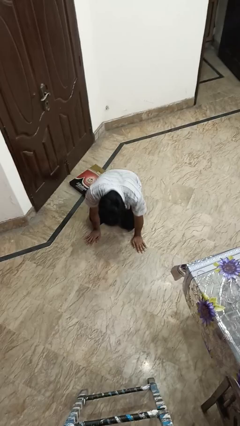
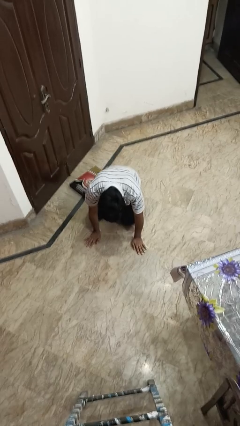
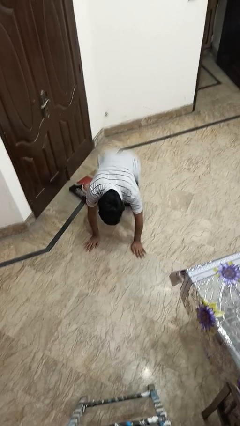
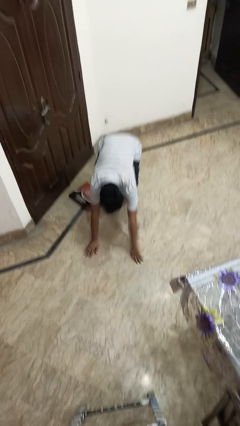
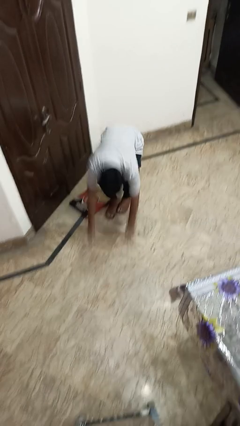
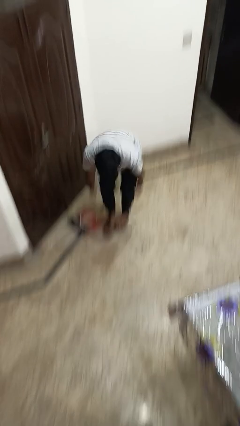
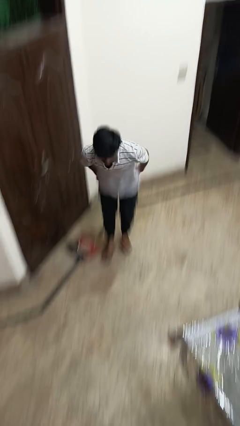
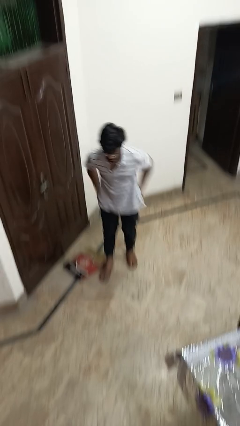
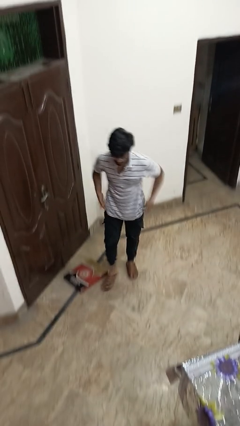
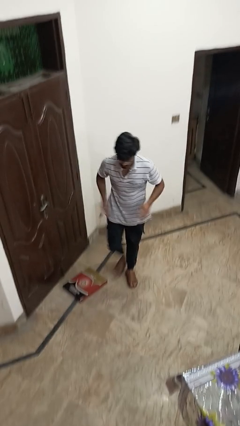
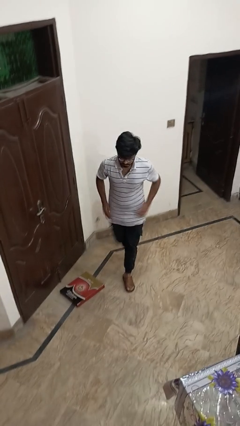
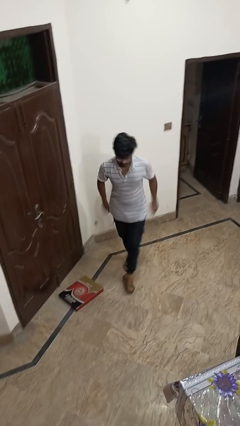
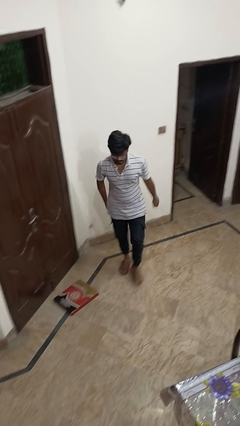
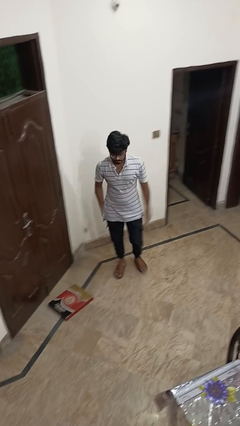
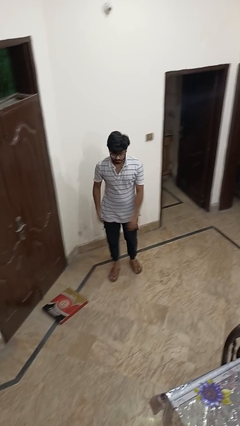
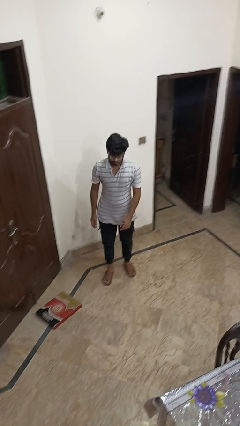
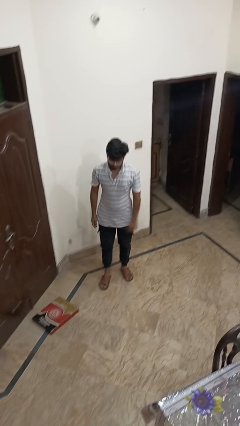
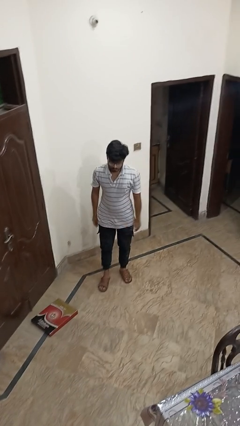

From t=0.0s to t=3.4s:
person stands up from floor

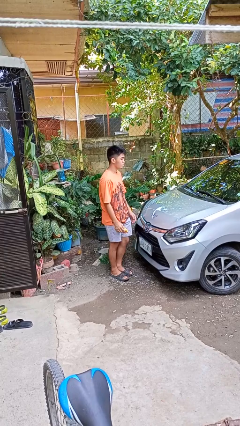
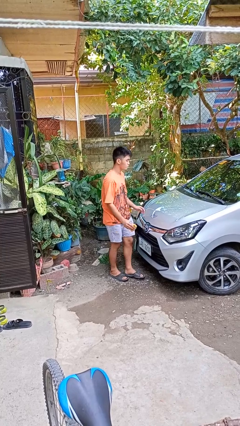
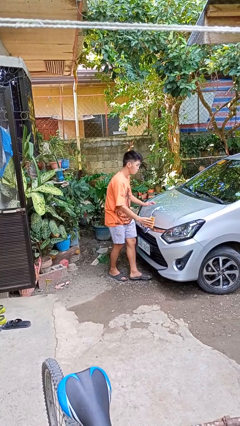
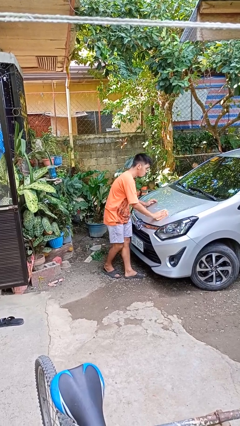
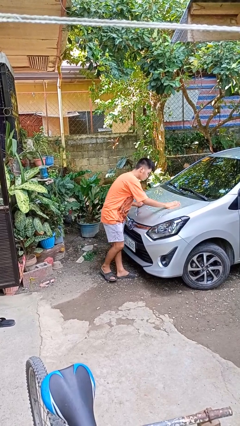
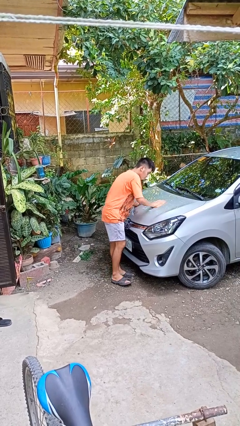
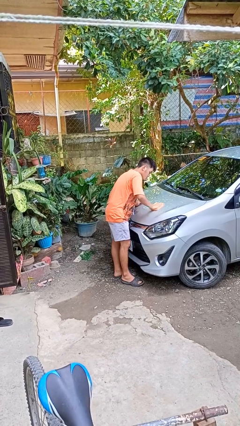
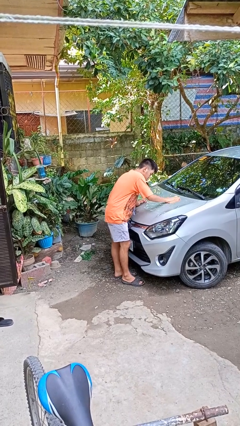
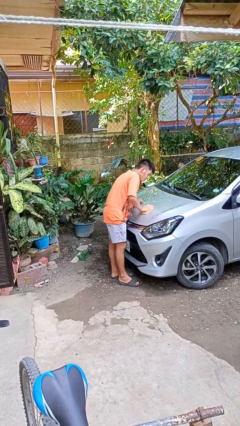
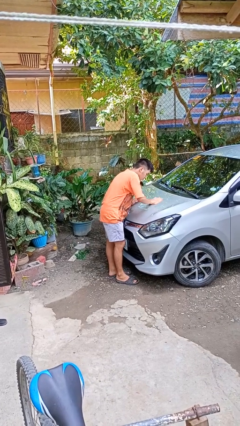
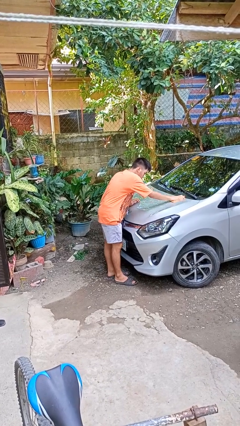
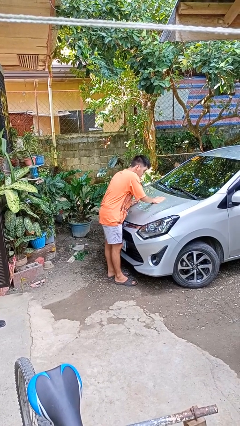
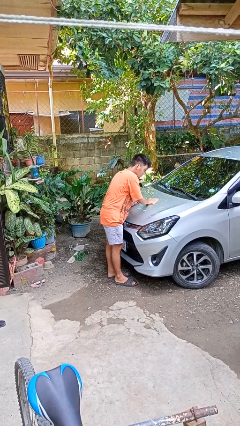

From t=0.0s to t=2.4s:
person polishes car with rag

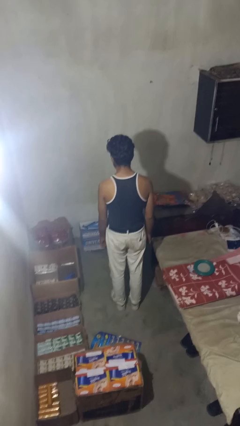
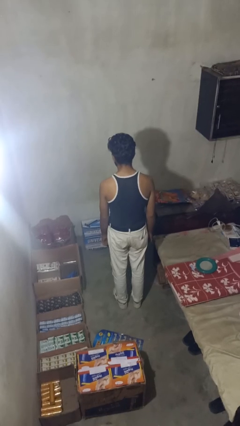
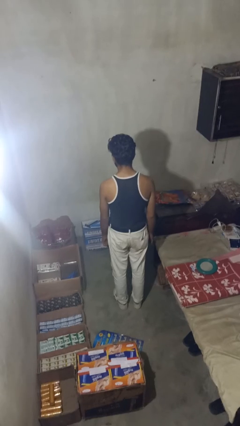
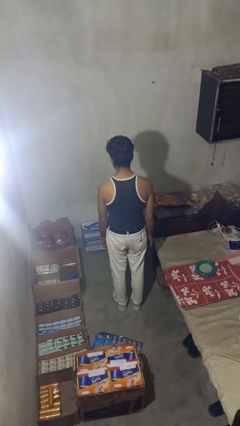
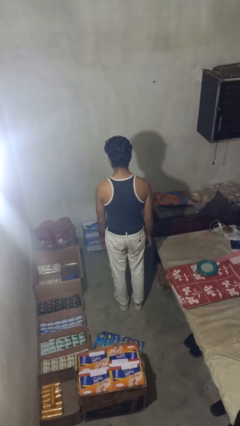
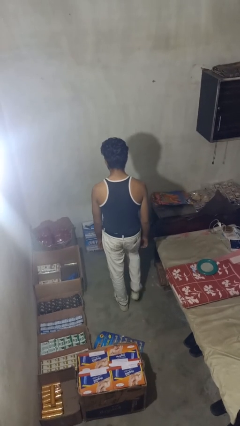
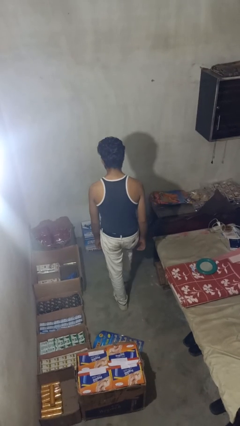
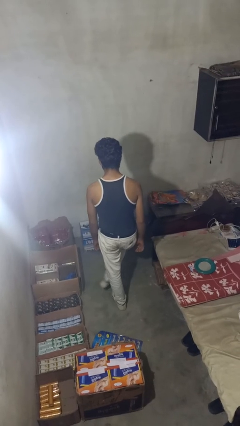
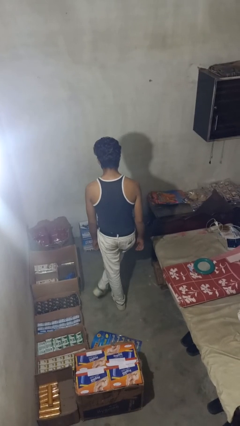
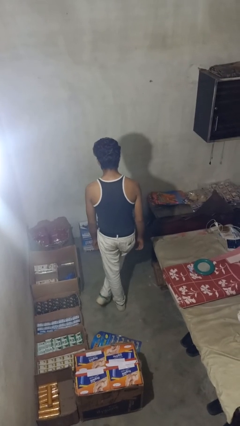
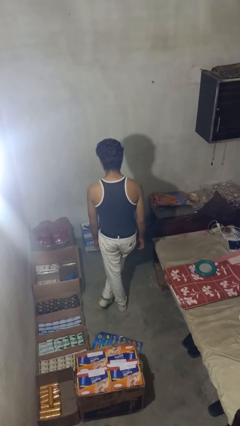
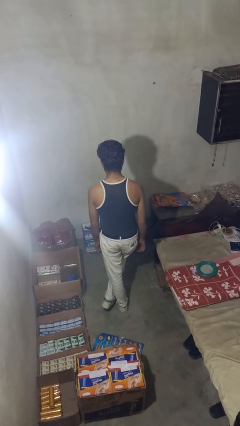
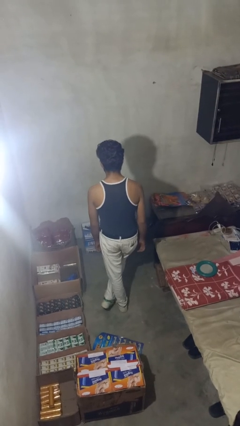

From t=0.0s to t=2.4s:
person crosses legs

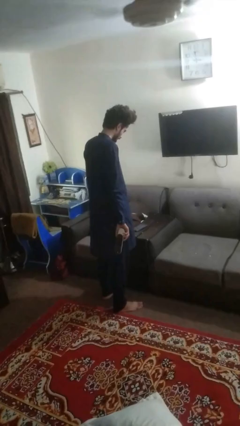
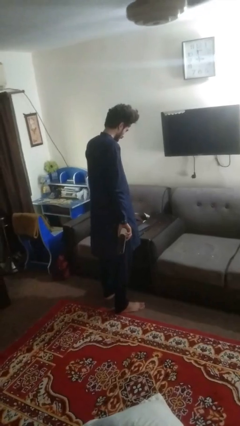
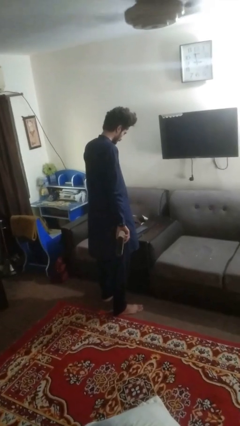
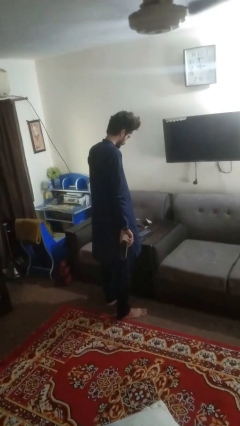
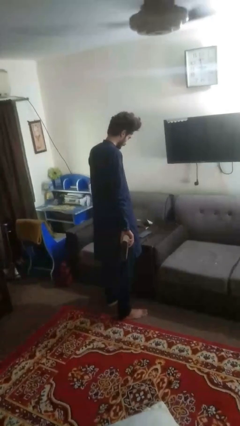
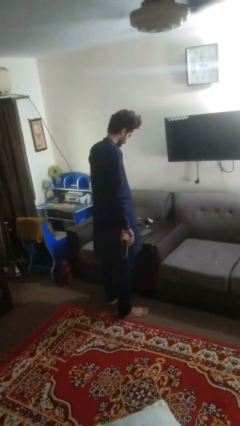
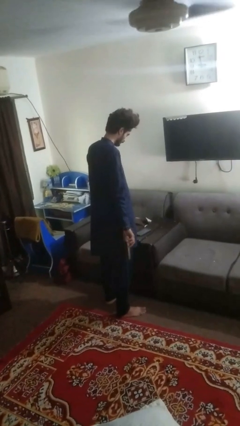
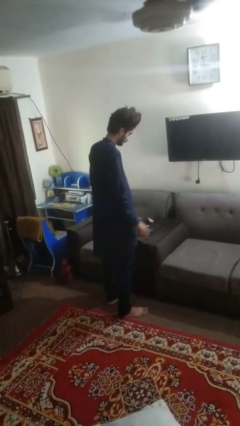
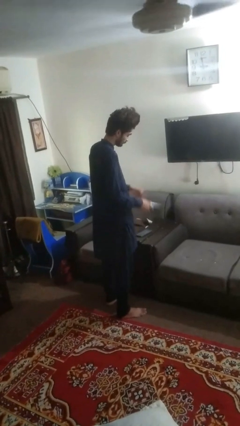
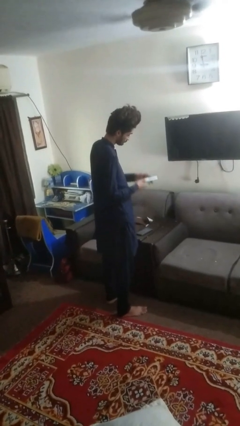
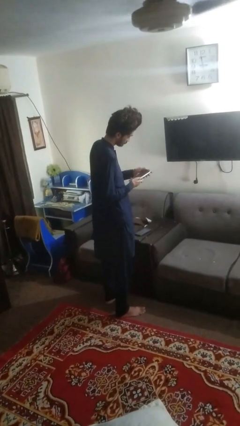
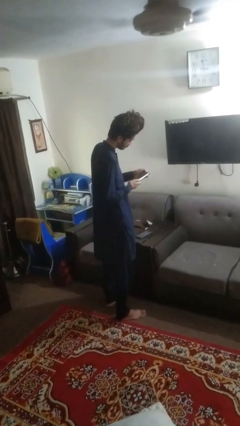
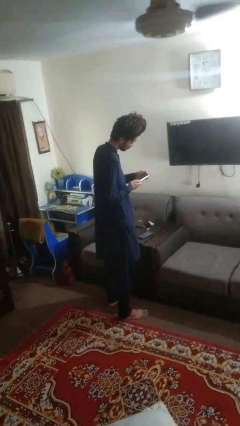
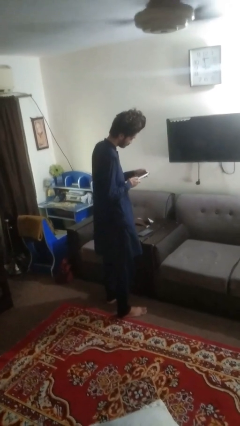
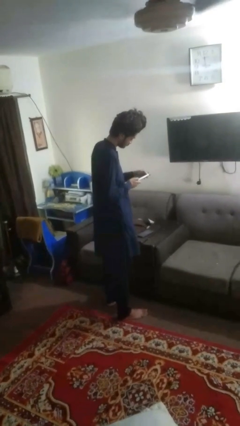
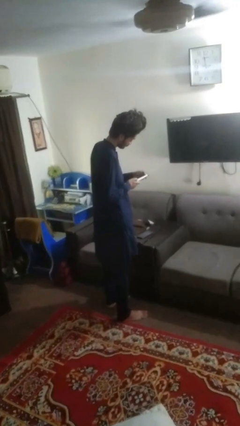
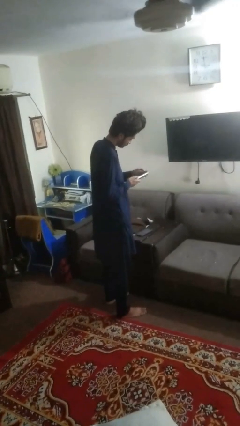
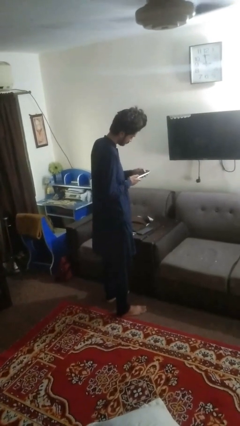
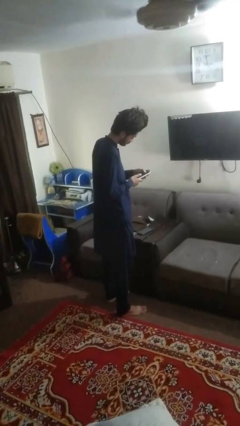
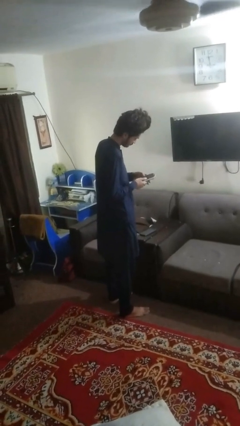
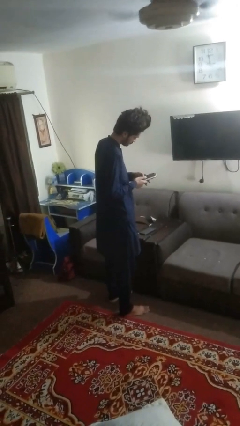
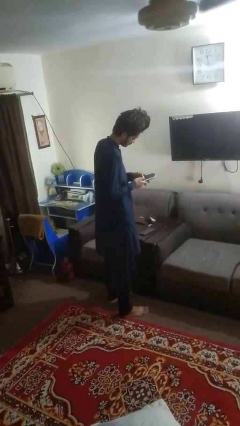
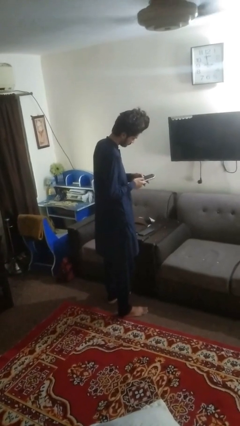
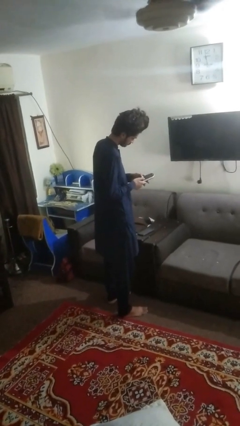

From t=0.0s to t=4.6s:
person uses television remote

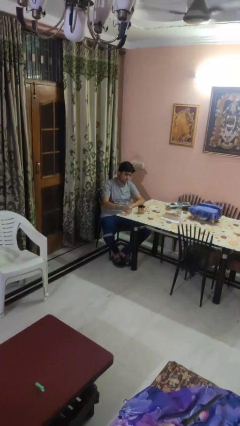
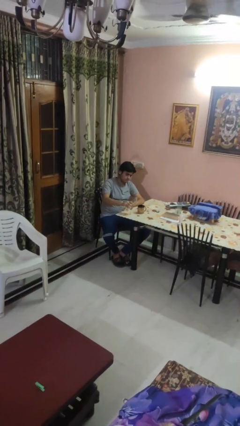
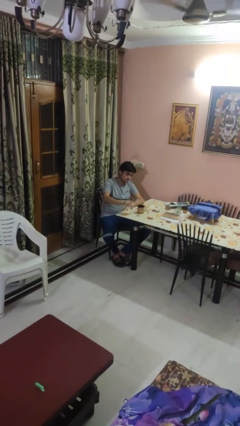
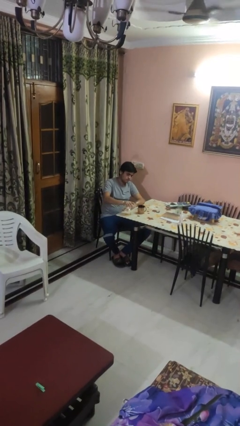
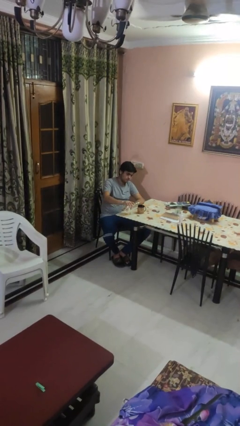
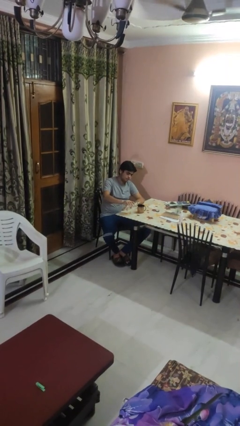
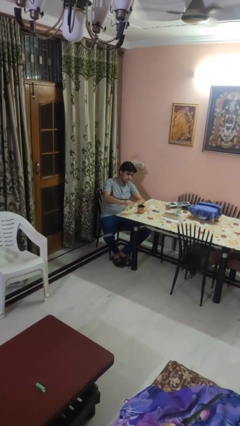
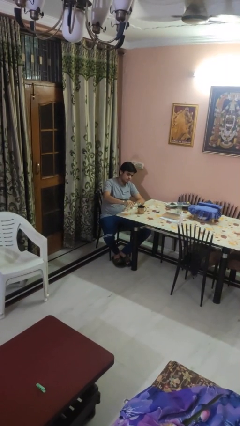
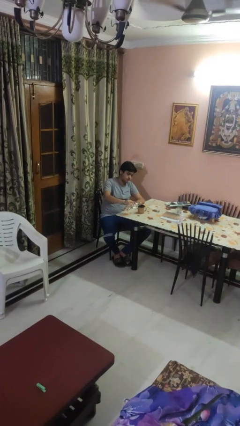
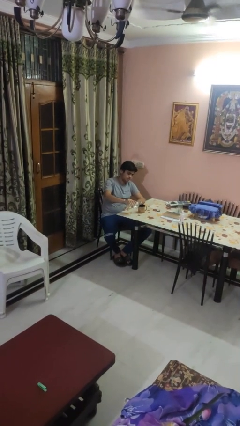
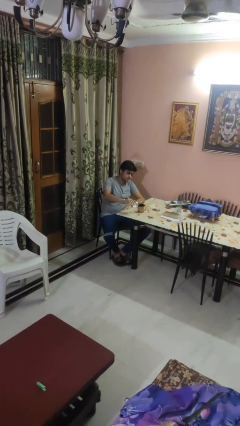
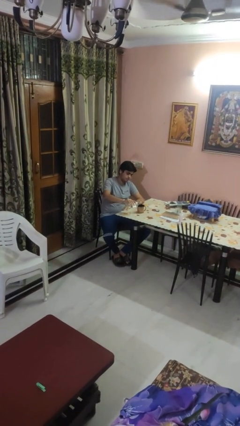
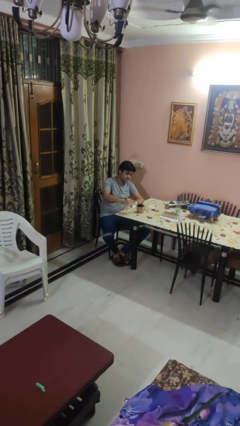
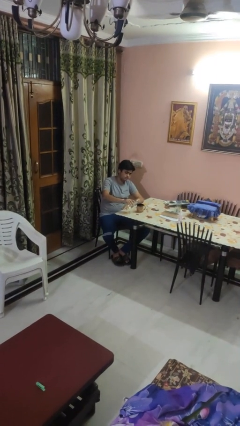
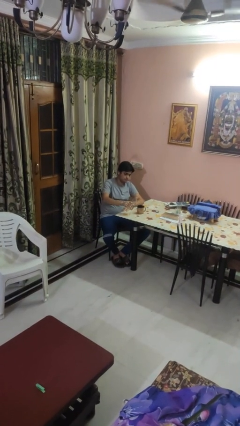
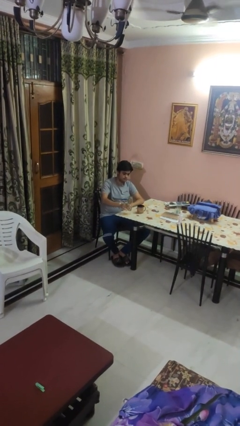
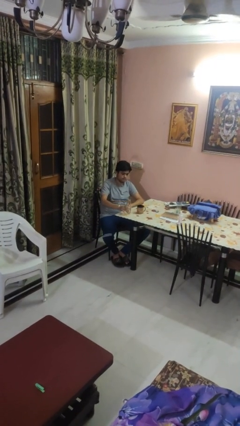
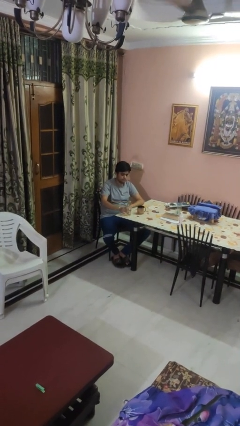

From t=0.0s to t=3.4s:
person pours liquid into cup

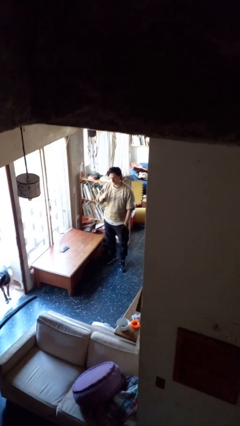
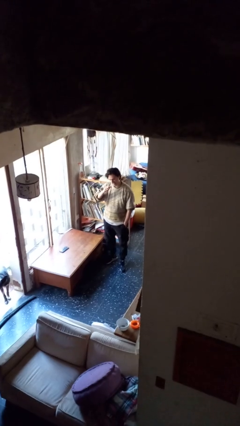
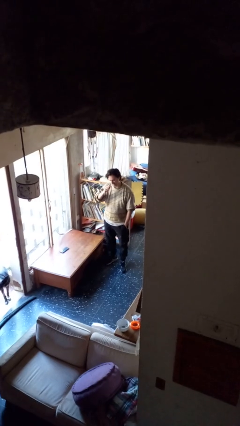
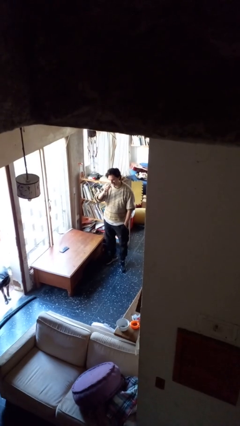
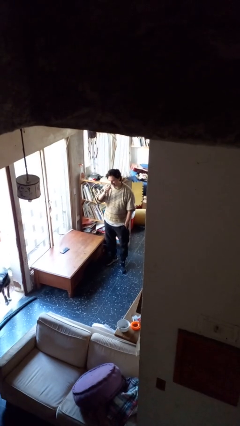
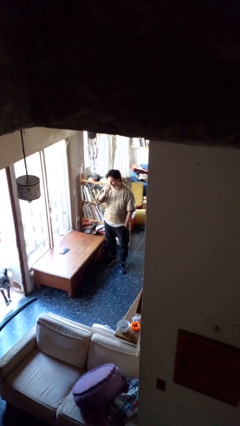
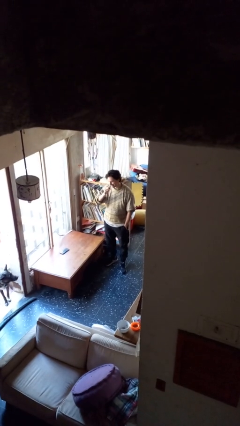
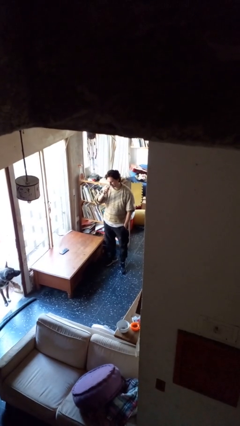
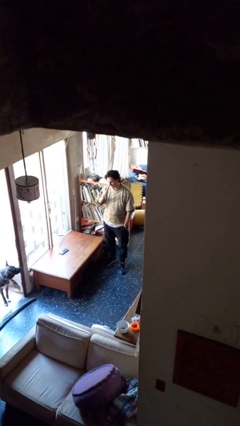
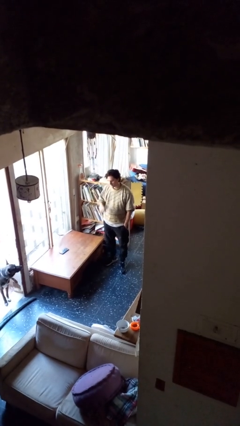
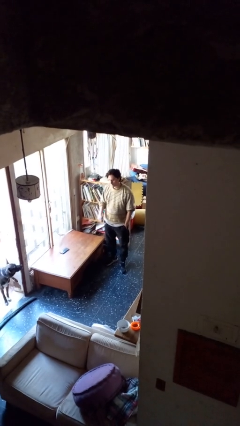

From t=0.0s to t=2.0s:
person brushes teeth
